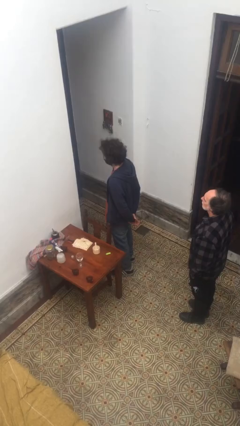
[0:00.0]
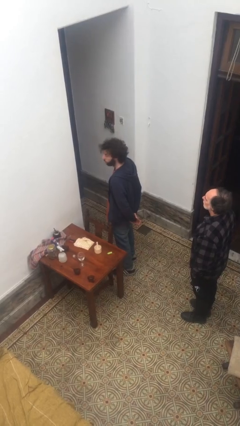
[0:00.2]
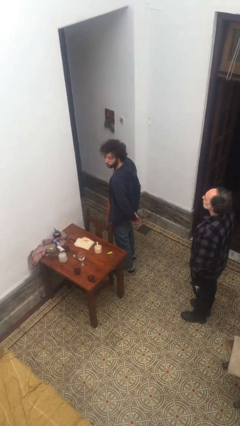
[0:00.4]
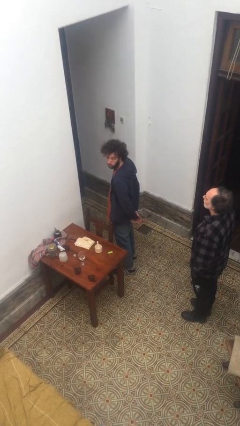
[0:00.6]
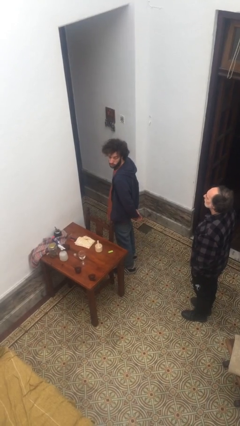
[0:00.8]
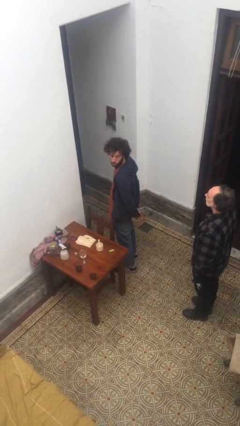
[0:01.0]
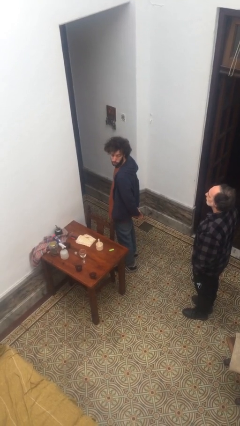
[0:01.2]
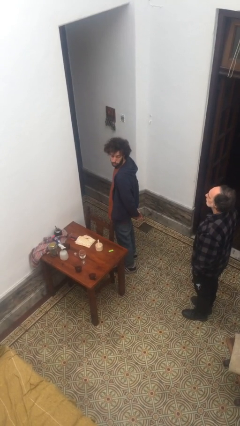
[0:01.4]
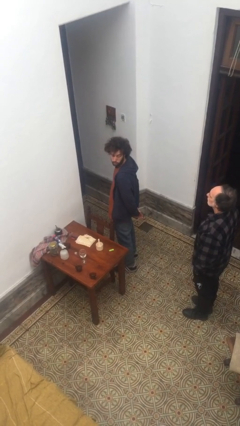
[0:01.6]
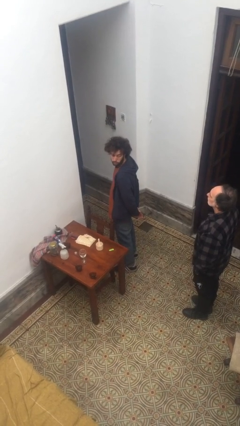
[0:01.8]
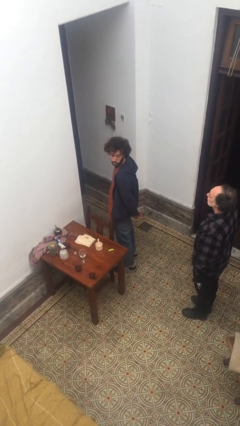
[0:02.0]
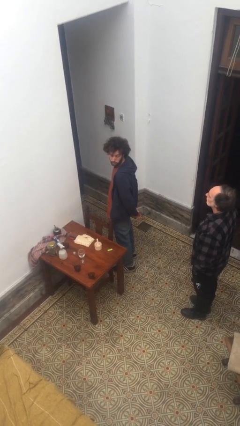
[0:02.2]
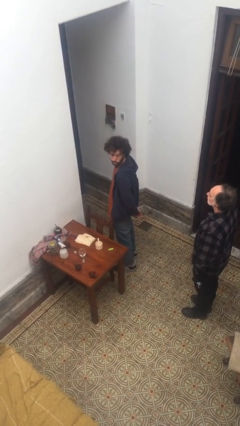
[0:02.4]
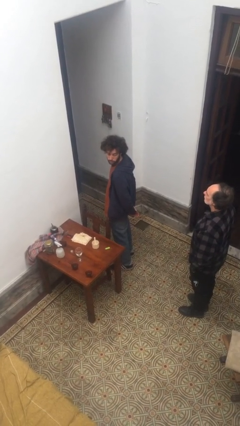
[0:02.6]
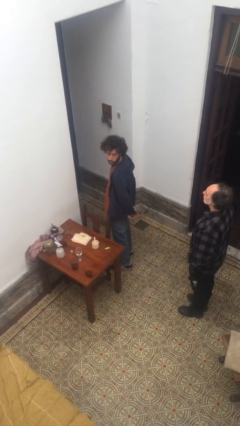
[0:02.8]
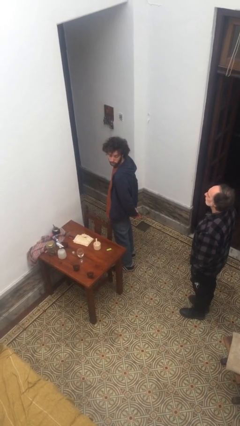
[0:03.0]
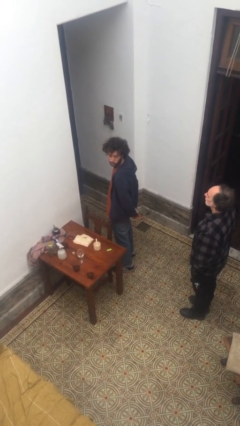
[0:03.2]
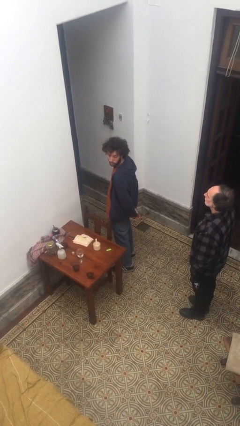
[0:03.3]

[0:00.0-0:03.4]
person looks over shoulder

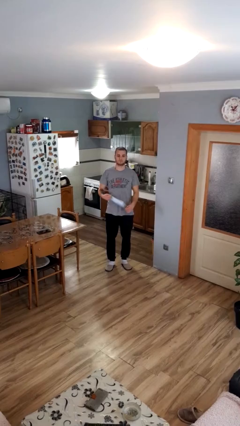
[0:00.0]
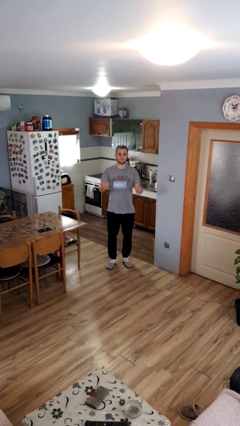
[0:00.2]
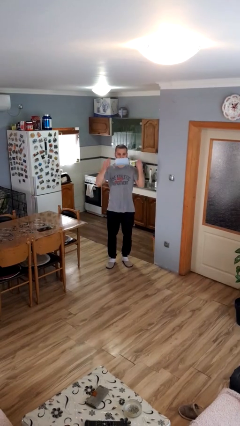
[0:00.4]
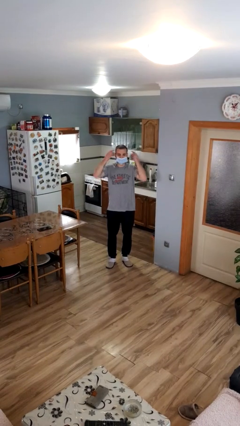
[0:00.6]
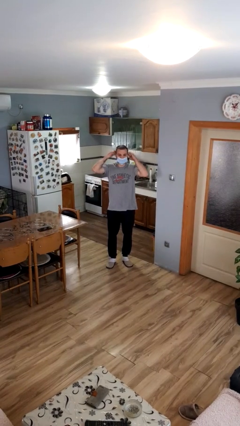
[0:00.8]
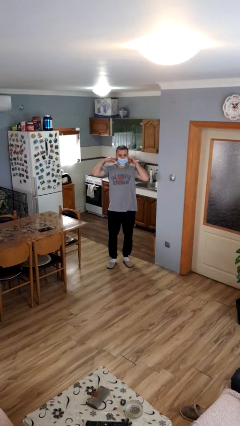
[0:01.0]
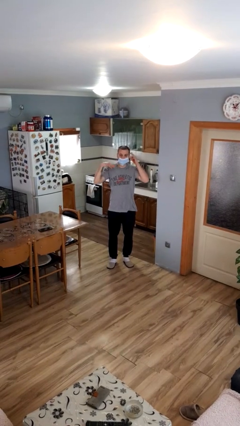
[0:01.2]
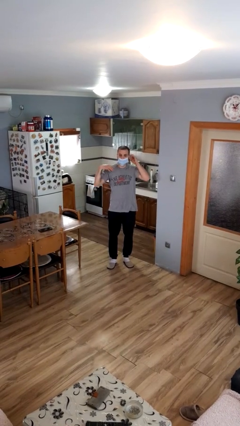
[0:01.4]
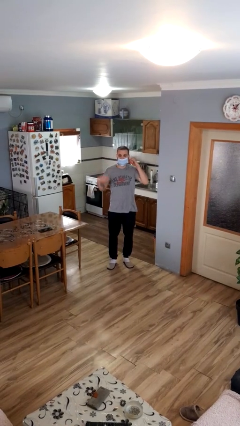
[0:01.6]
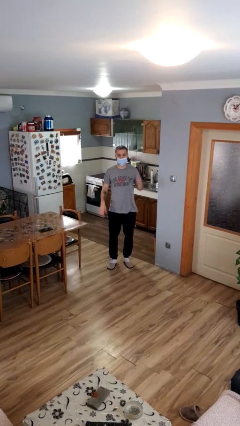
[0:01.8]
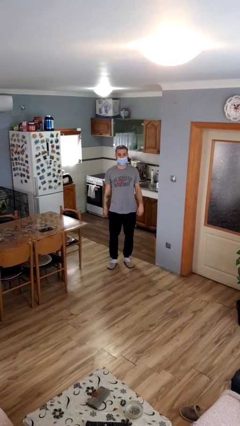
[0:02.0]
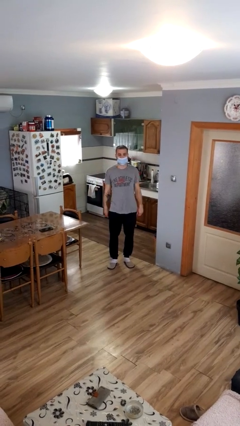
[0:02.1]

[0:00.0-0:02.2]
person puts on facemask

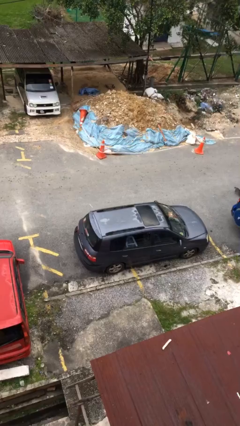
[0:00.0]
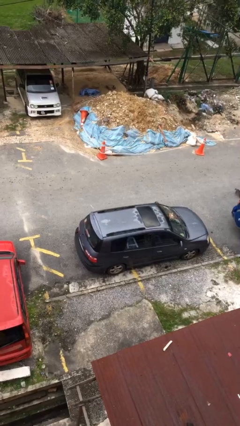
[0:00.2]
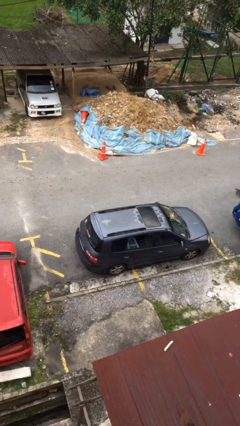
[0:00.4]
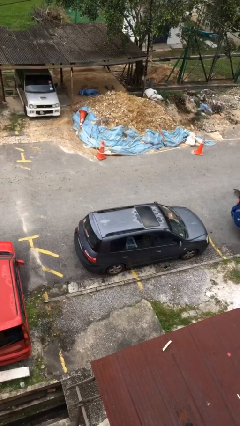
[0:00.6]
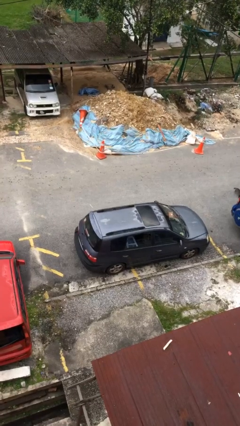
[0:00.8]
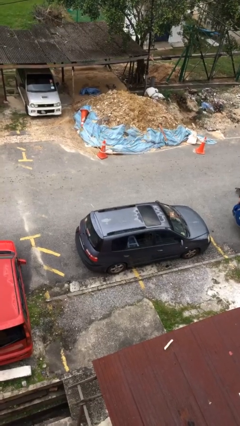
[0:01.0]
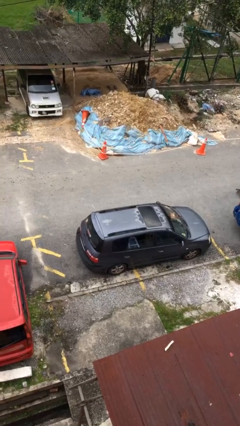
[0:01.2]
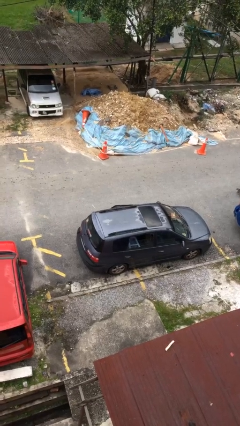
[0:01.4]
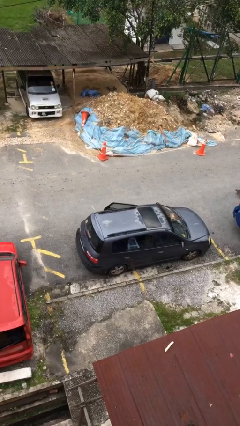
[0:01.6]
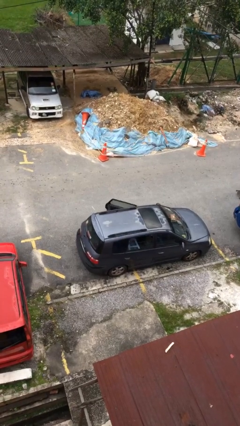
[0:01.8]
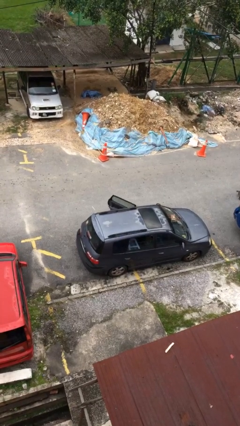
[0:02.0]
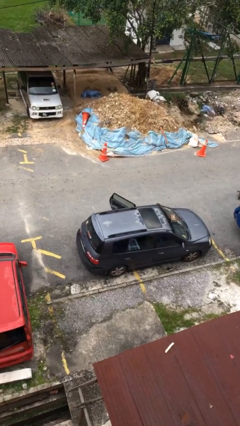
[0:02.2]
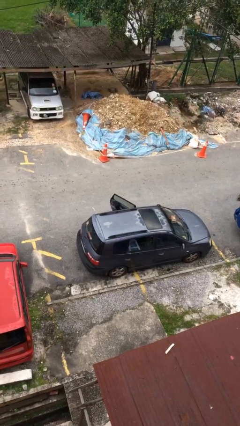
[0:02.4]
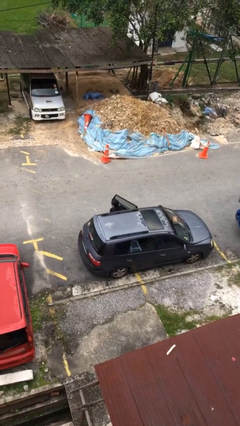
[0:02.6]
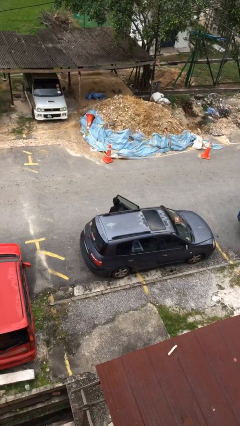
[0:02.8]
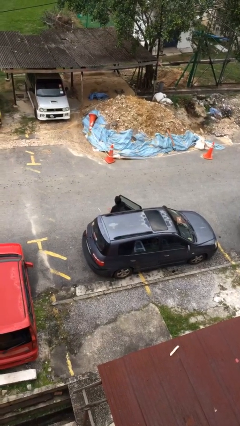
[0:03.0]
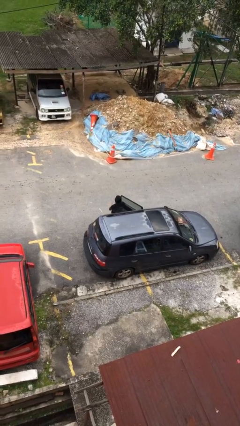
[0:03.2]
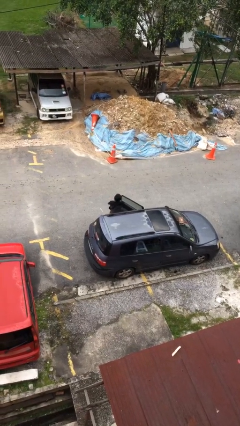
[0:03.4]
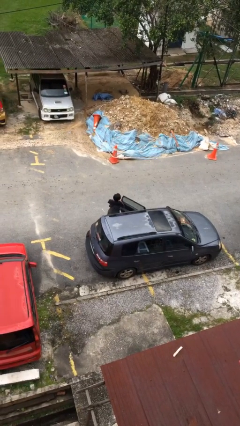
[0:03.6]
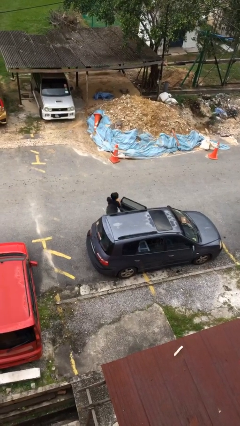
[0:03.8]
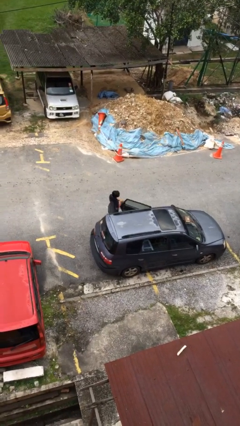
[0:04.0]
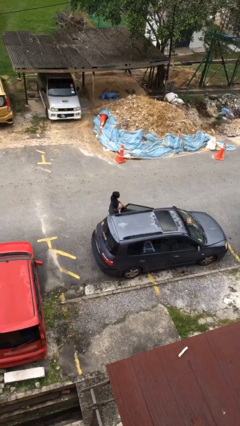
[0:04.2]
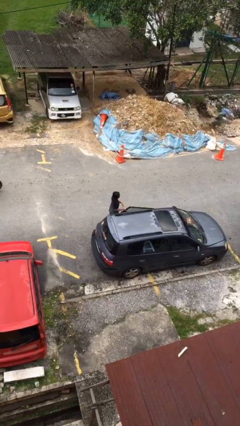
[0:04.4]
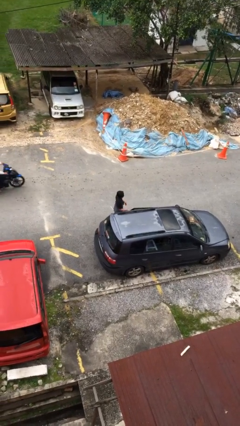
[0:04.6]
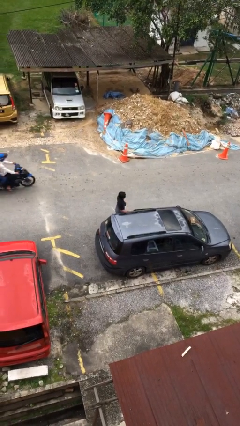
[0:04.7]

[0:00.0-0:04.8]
person exits car

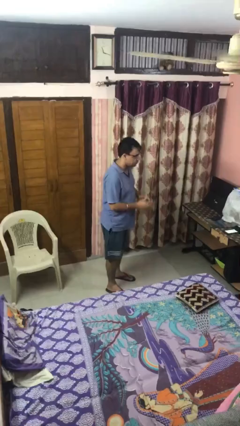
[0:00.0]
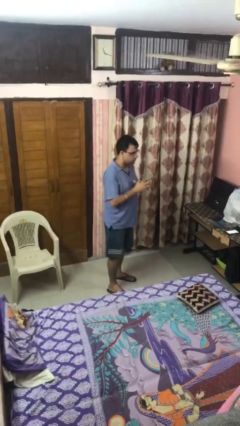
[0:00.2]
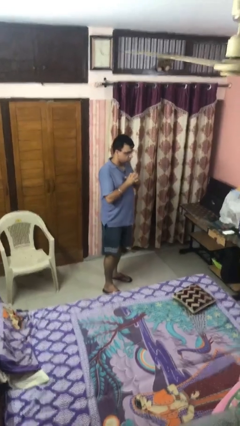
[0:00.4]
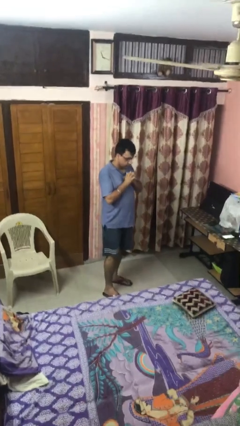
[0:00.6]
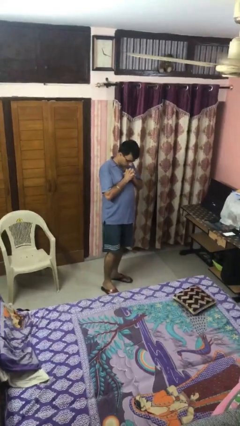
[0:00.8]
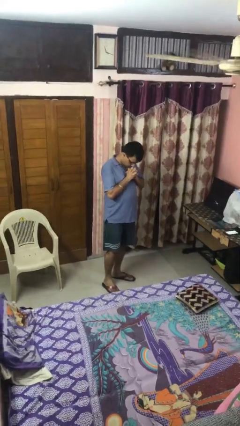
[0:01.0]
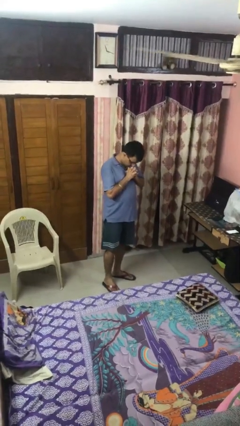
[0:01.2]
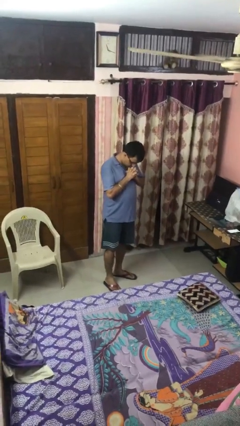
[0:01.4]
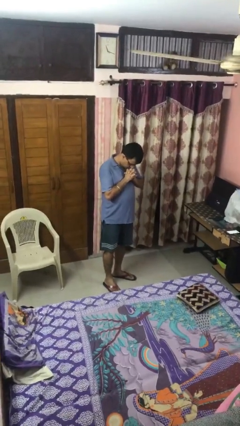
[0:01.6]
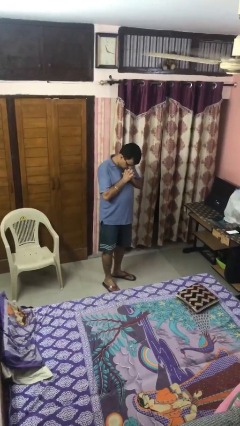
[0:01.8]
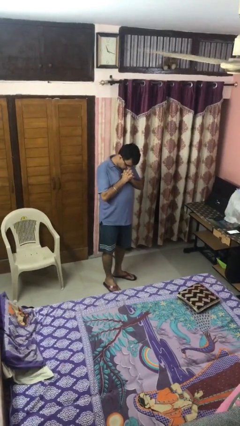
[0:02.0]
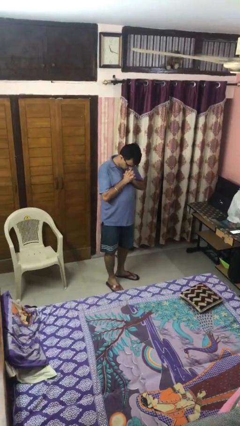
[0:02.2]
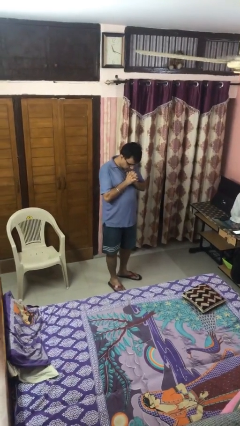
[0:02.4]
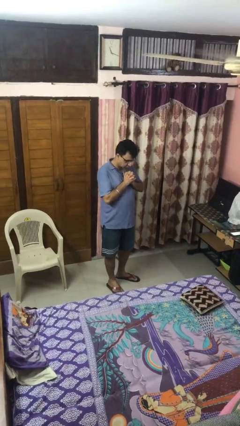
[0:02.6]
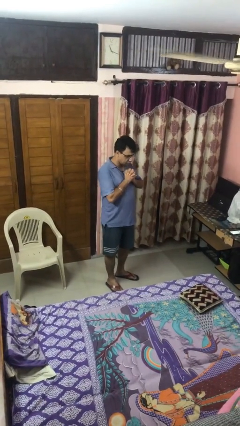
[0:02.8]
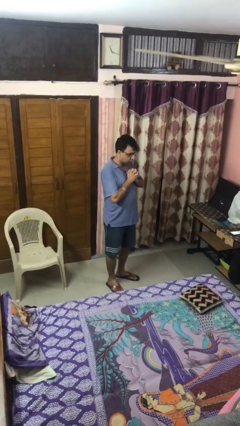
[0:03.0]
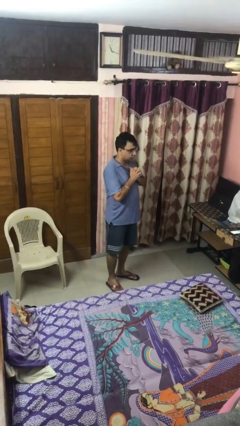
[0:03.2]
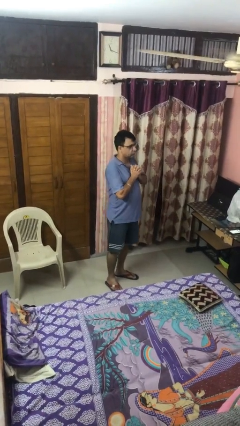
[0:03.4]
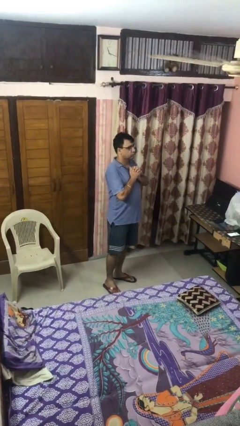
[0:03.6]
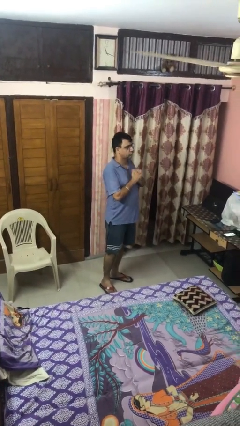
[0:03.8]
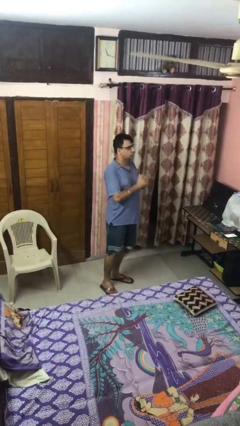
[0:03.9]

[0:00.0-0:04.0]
person prays

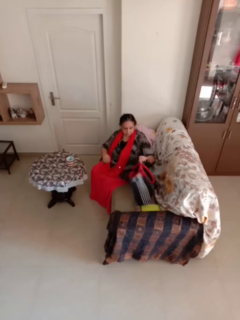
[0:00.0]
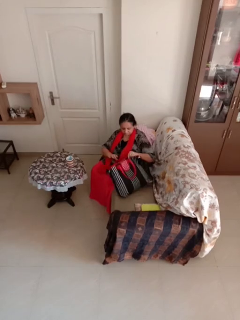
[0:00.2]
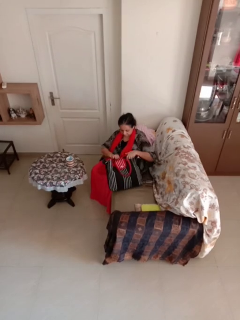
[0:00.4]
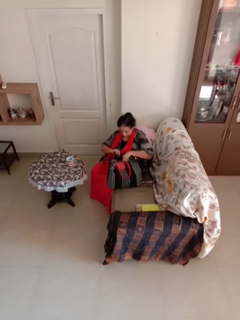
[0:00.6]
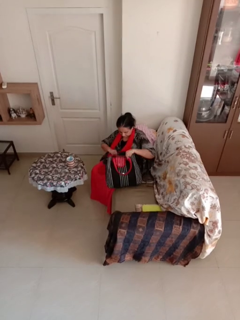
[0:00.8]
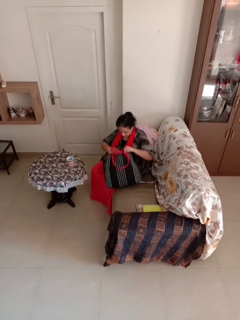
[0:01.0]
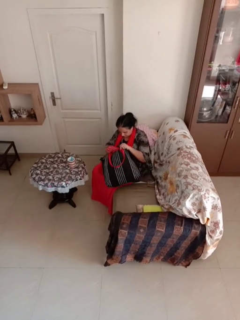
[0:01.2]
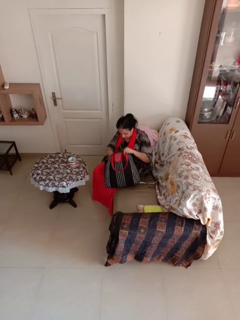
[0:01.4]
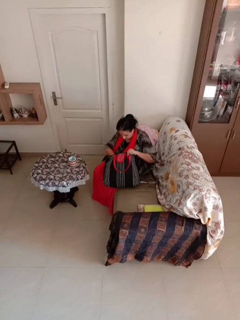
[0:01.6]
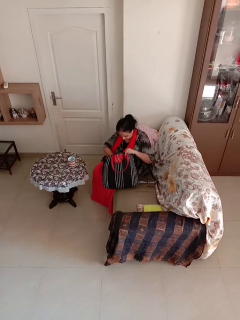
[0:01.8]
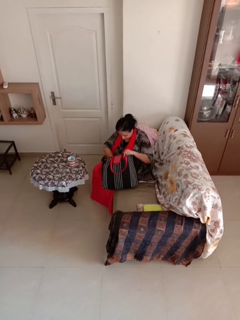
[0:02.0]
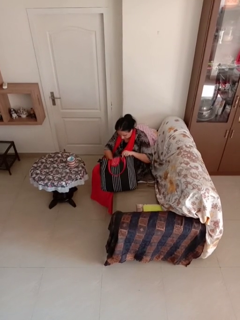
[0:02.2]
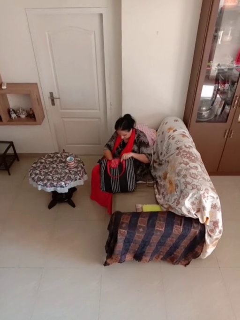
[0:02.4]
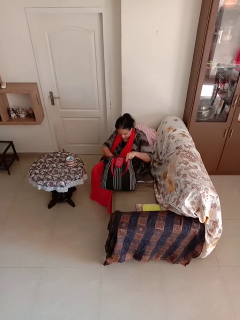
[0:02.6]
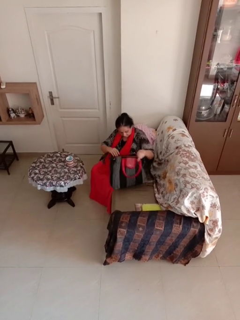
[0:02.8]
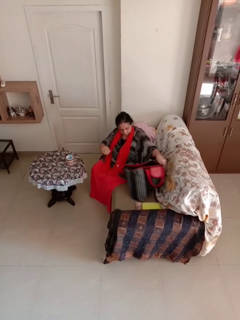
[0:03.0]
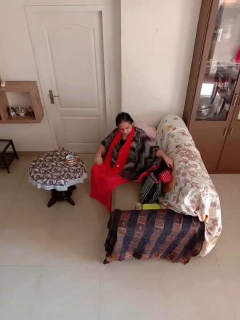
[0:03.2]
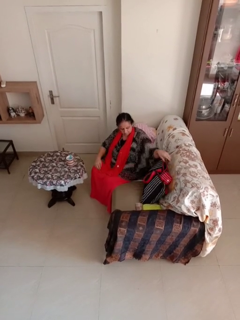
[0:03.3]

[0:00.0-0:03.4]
person searches in bag

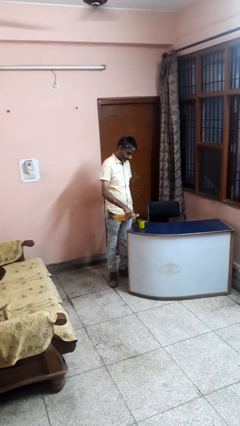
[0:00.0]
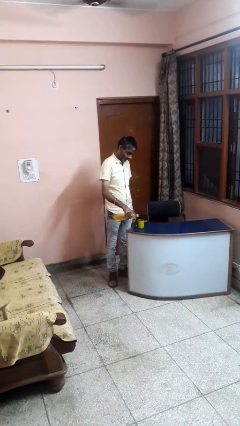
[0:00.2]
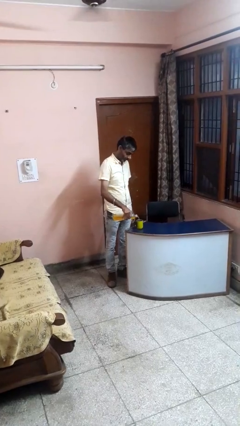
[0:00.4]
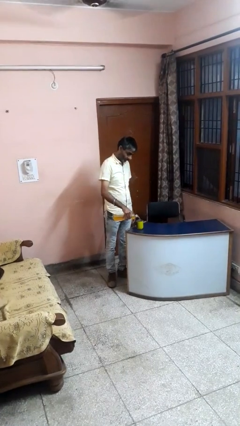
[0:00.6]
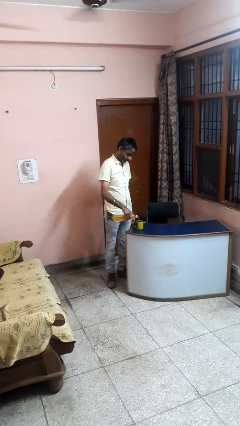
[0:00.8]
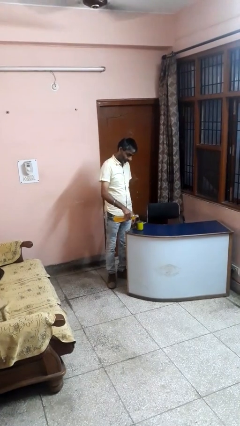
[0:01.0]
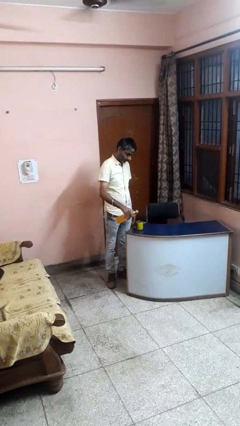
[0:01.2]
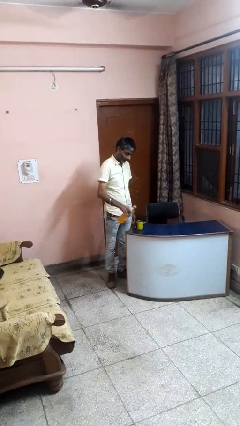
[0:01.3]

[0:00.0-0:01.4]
person pours liquid into cup
